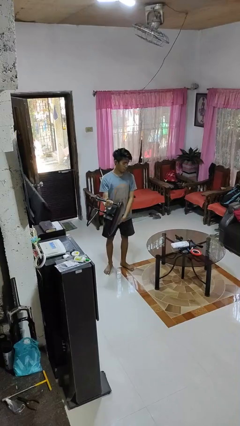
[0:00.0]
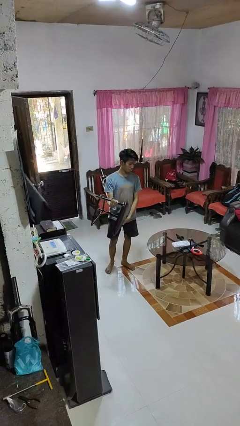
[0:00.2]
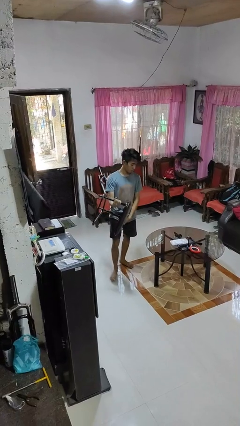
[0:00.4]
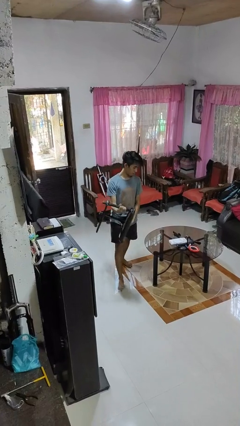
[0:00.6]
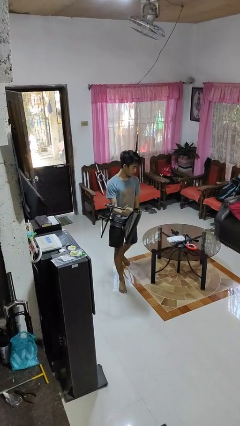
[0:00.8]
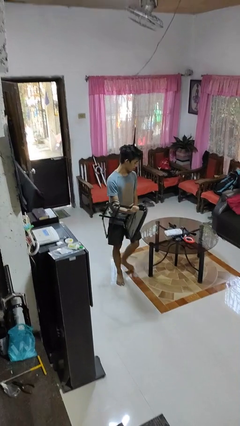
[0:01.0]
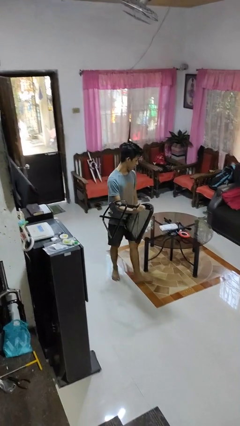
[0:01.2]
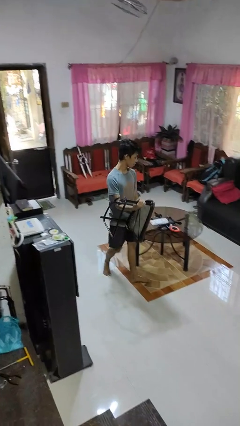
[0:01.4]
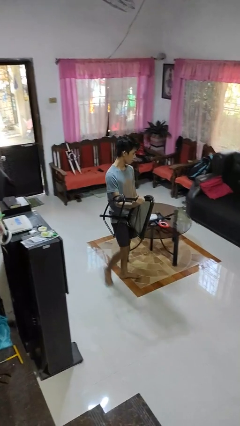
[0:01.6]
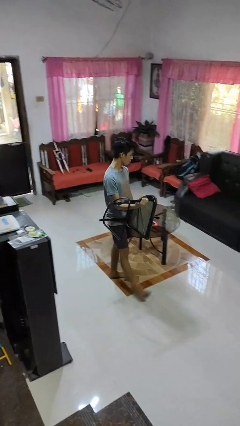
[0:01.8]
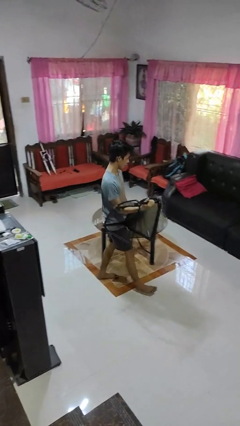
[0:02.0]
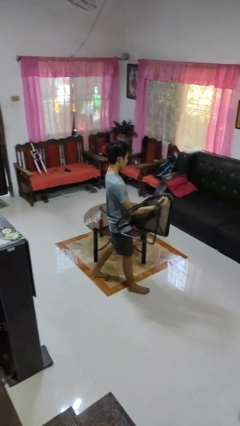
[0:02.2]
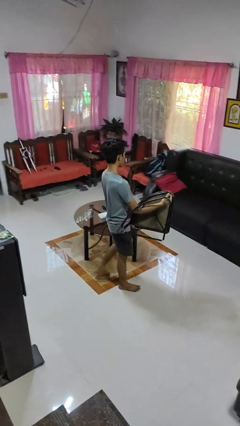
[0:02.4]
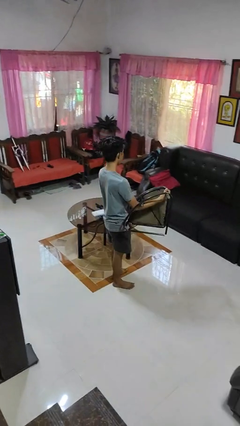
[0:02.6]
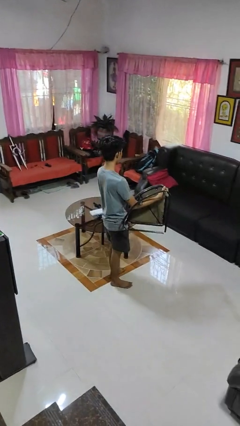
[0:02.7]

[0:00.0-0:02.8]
person carries furniture

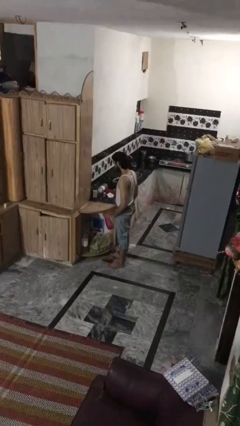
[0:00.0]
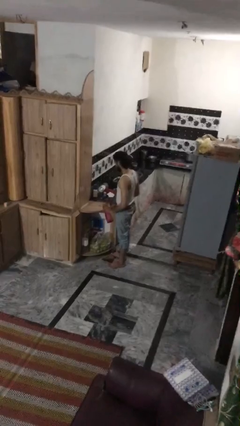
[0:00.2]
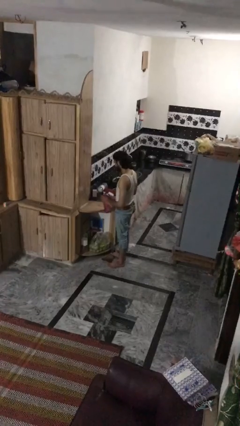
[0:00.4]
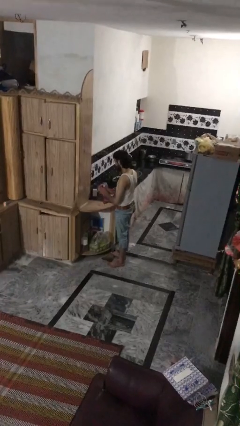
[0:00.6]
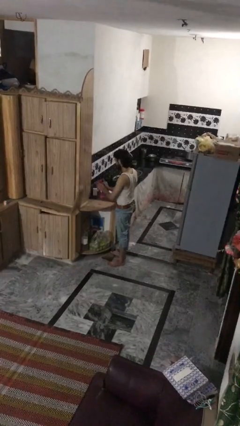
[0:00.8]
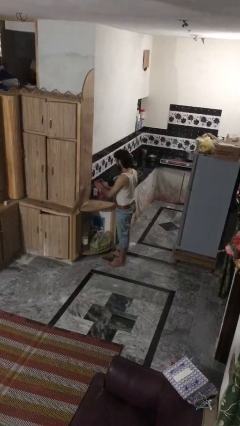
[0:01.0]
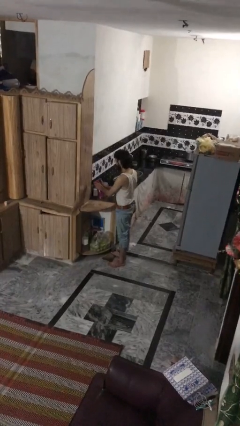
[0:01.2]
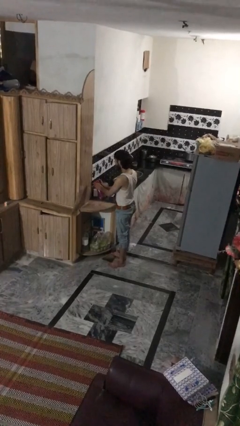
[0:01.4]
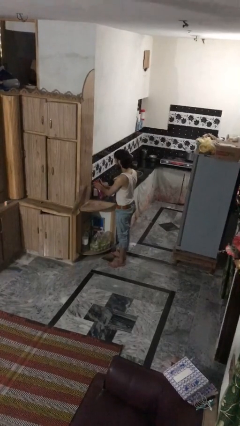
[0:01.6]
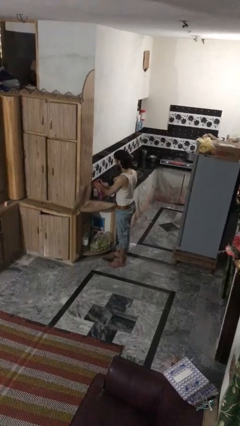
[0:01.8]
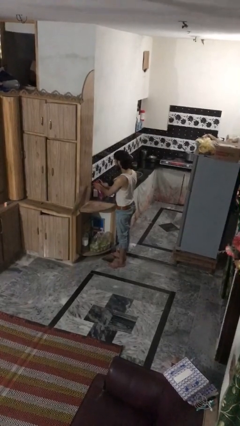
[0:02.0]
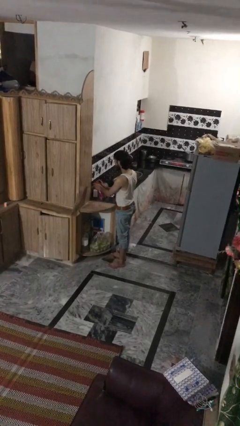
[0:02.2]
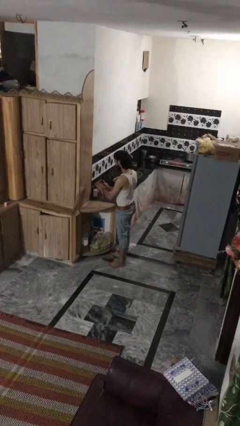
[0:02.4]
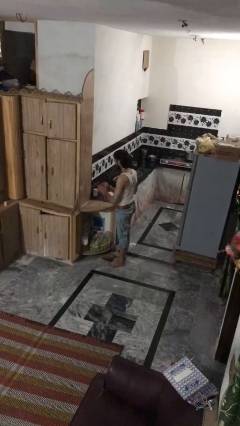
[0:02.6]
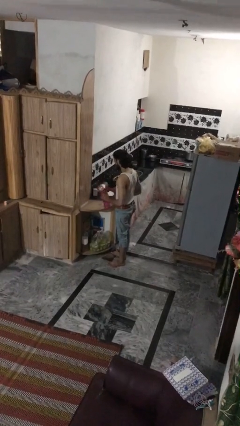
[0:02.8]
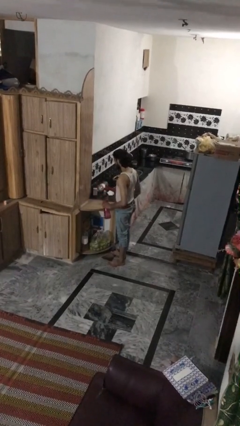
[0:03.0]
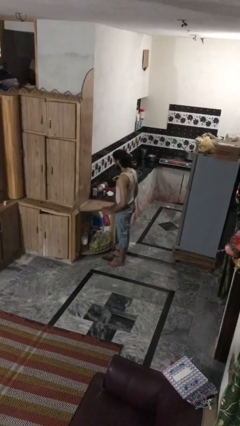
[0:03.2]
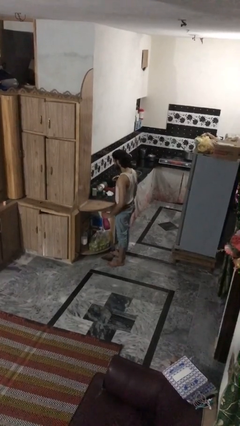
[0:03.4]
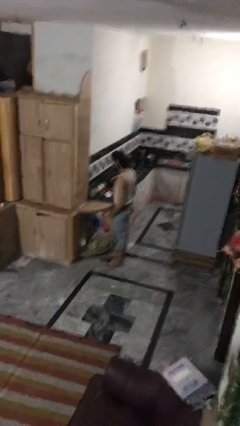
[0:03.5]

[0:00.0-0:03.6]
person sprays from bottle

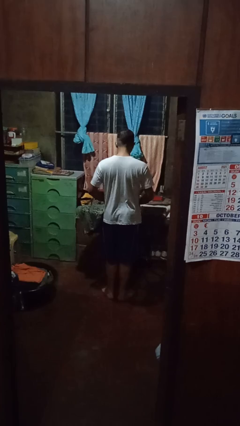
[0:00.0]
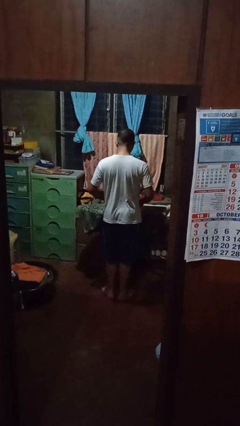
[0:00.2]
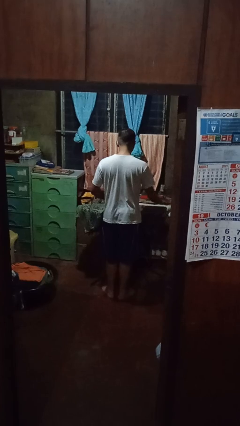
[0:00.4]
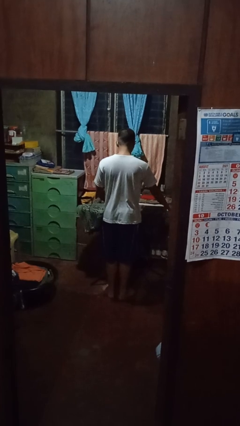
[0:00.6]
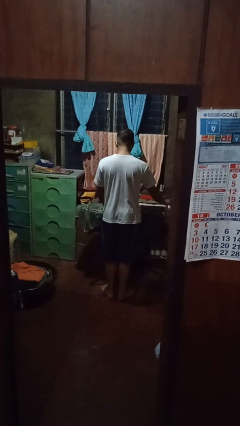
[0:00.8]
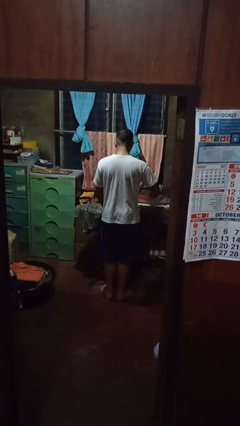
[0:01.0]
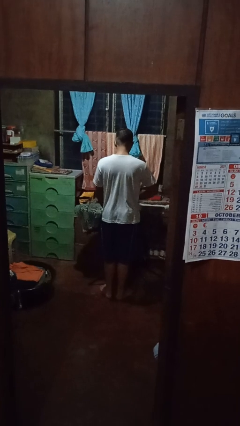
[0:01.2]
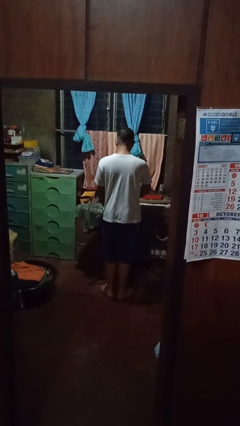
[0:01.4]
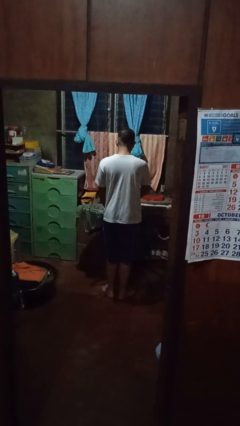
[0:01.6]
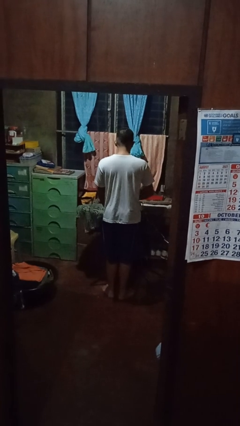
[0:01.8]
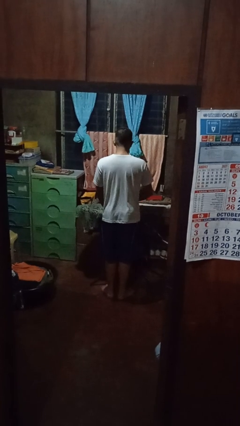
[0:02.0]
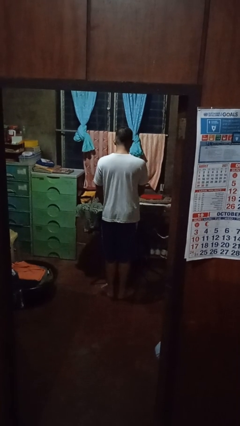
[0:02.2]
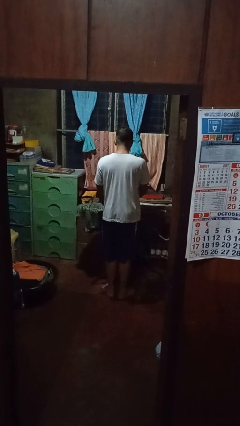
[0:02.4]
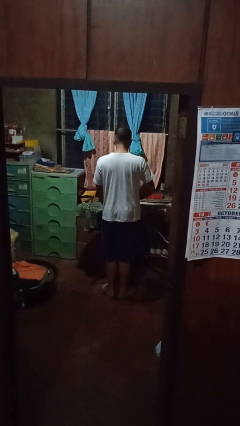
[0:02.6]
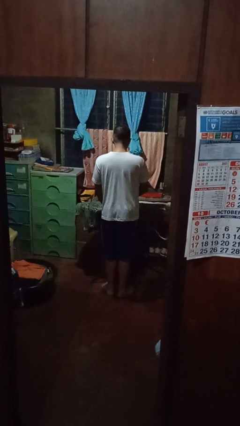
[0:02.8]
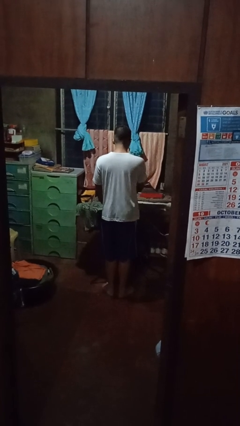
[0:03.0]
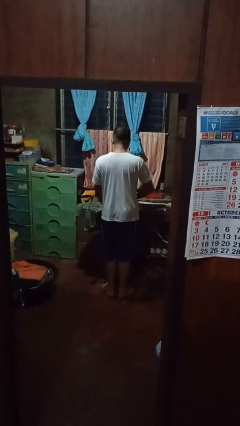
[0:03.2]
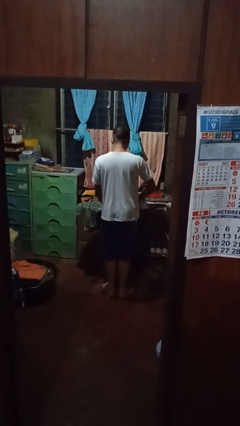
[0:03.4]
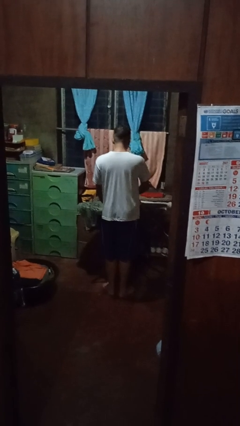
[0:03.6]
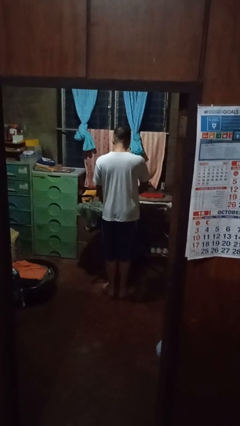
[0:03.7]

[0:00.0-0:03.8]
person irons clothes

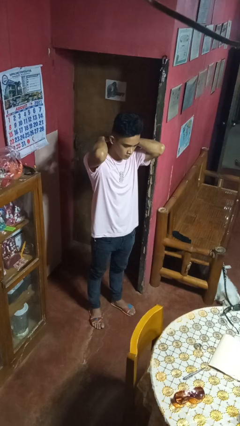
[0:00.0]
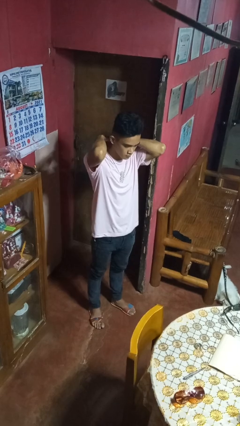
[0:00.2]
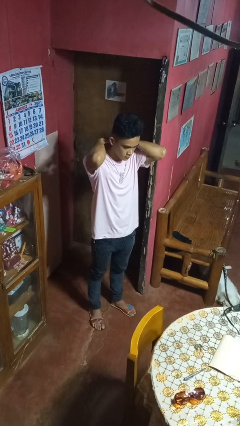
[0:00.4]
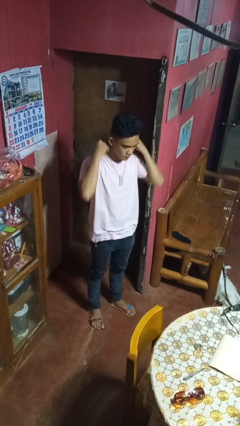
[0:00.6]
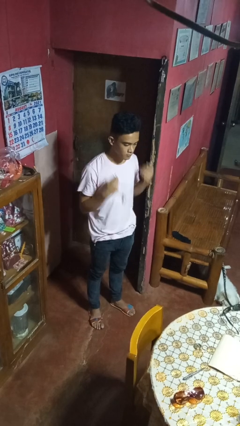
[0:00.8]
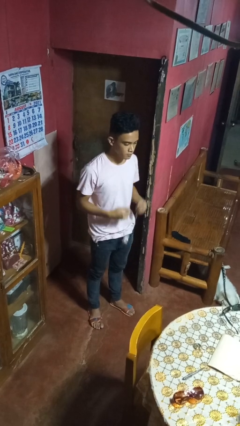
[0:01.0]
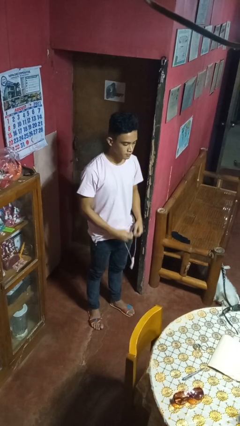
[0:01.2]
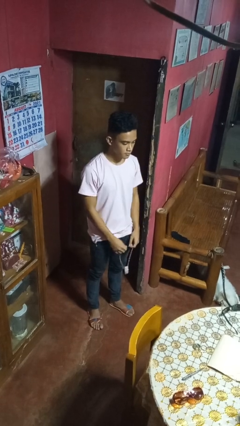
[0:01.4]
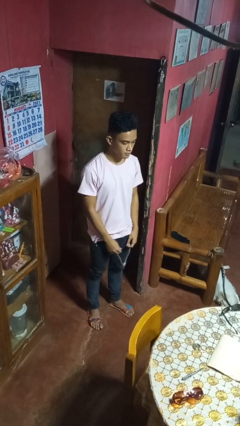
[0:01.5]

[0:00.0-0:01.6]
person takes off necklace

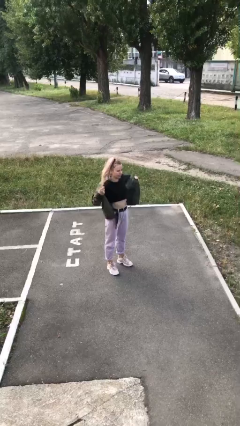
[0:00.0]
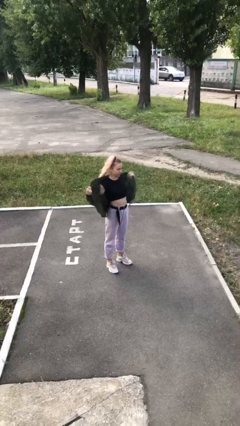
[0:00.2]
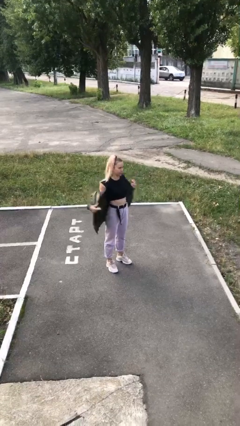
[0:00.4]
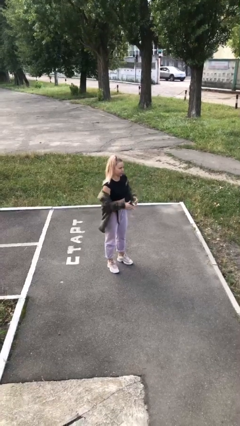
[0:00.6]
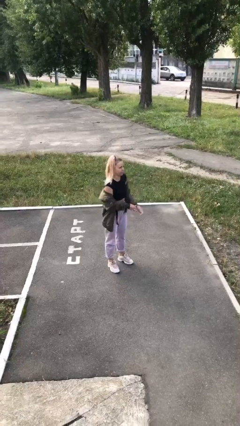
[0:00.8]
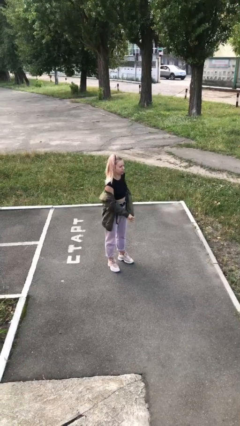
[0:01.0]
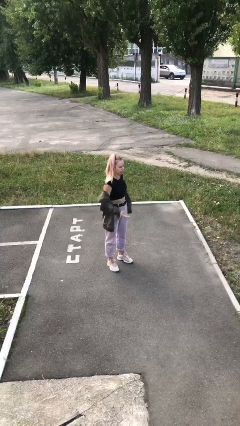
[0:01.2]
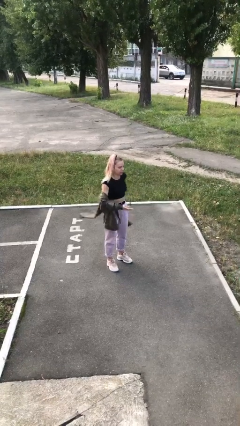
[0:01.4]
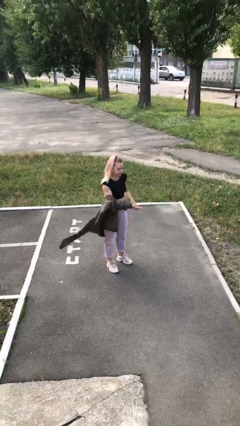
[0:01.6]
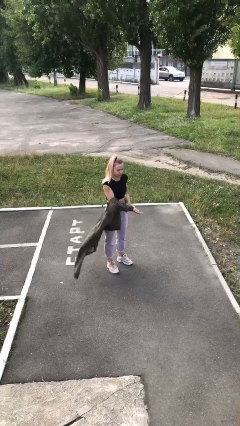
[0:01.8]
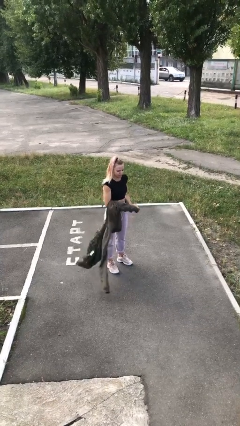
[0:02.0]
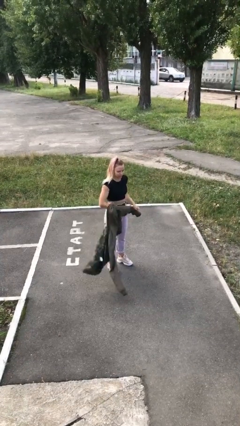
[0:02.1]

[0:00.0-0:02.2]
person takes off jacket

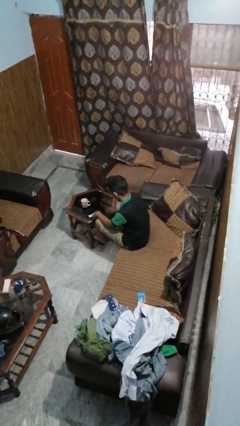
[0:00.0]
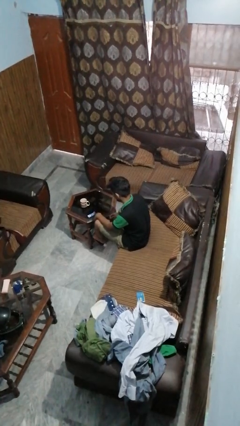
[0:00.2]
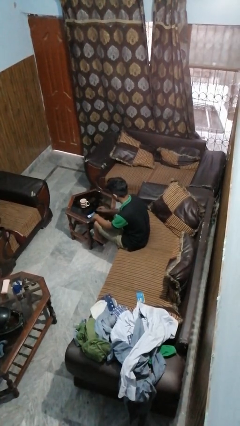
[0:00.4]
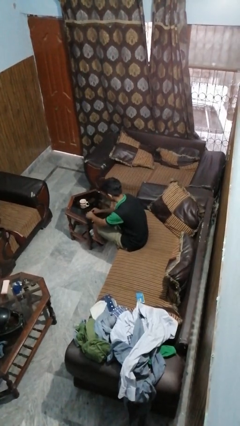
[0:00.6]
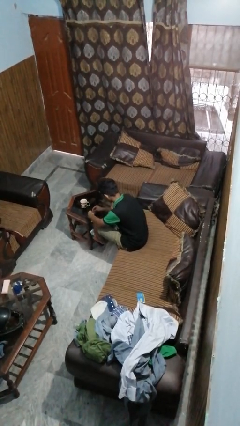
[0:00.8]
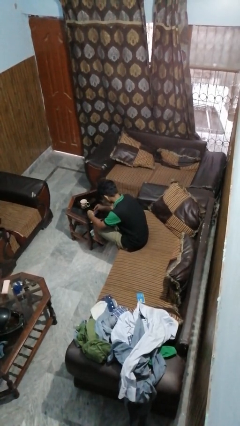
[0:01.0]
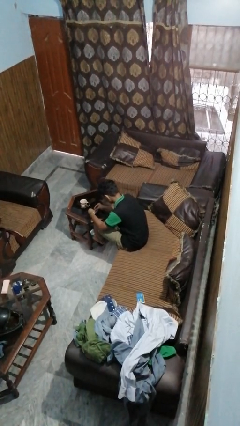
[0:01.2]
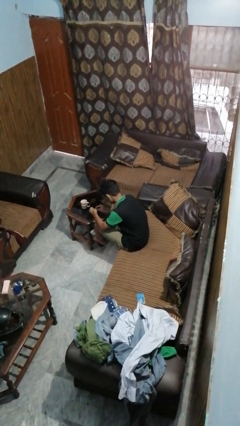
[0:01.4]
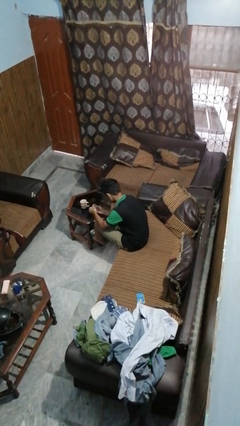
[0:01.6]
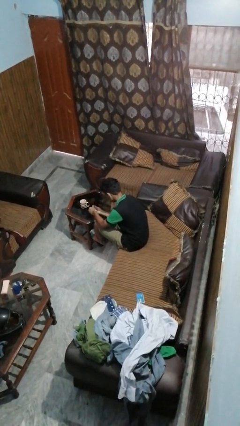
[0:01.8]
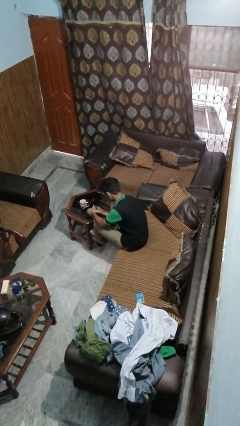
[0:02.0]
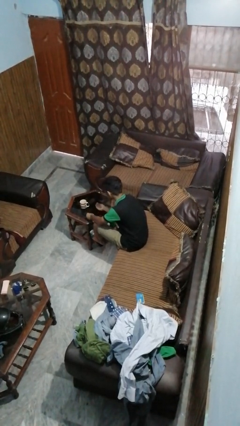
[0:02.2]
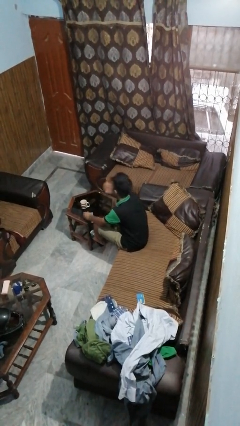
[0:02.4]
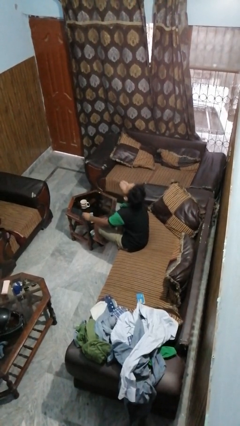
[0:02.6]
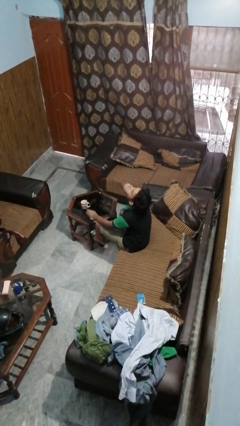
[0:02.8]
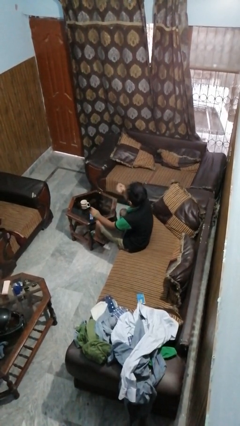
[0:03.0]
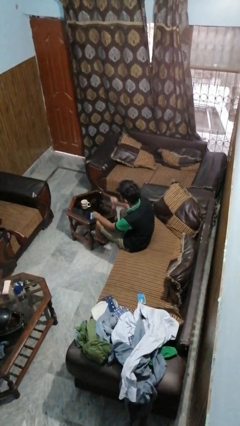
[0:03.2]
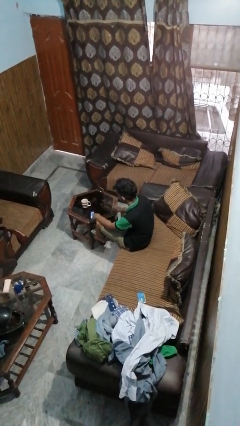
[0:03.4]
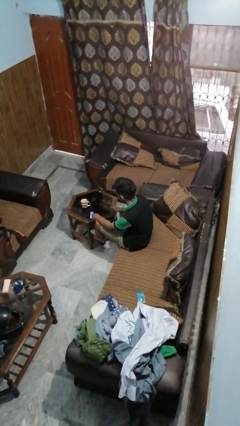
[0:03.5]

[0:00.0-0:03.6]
person takes medicine pills
